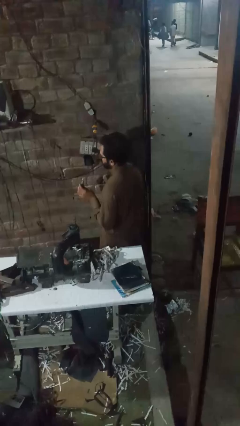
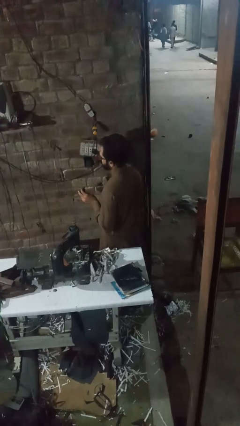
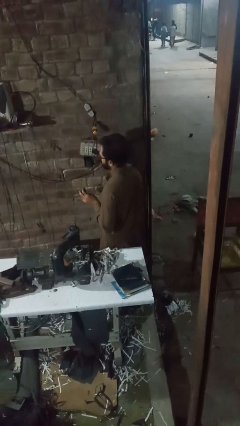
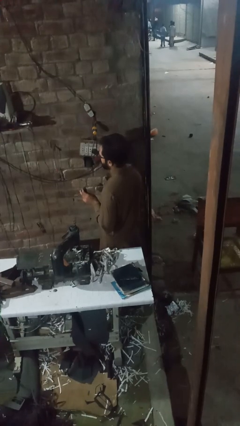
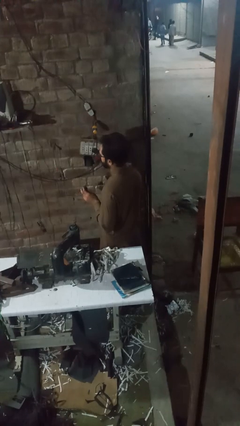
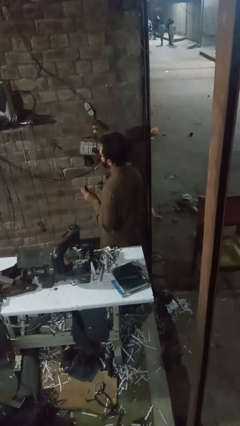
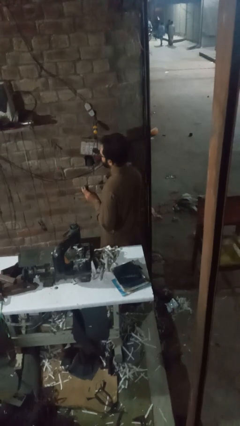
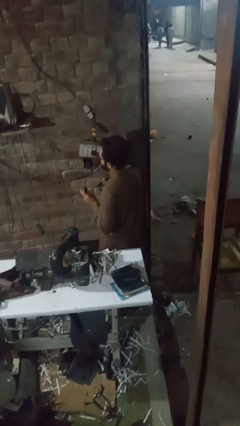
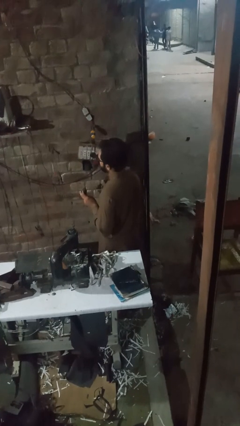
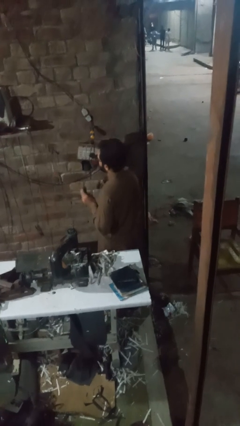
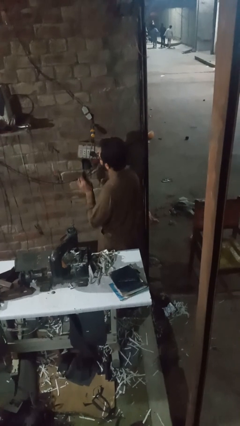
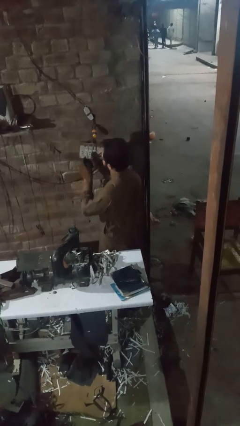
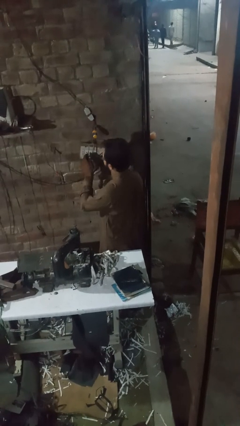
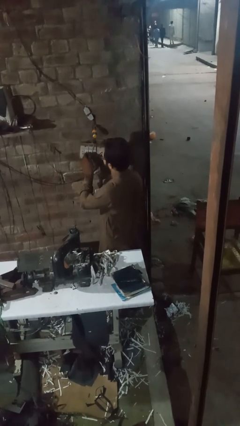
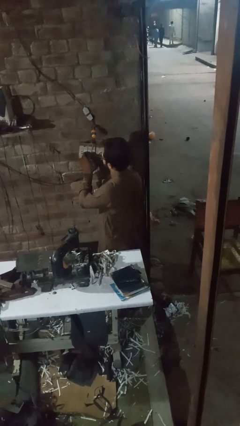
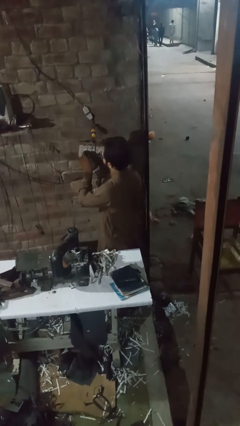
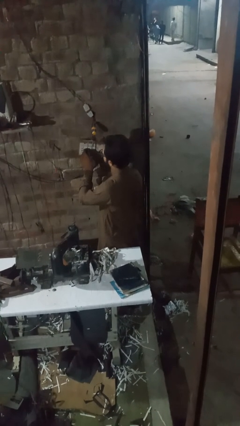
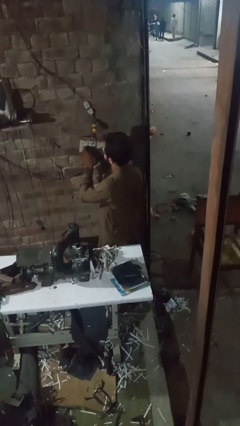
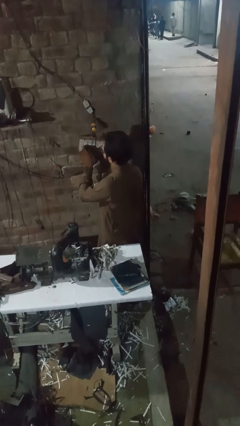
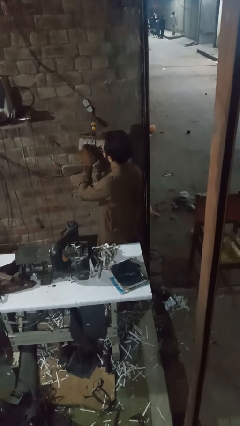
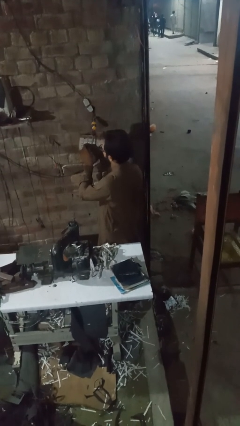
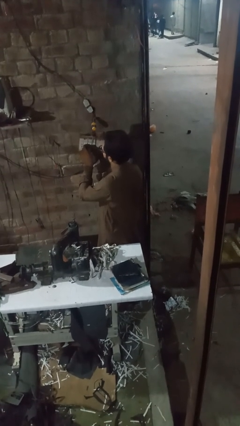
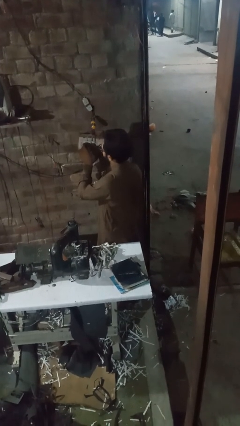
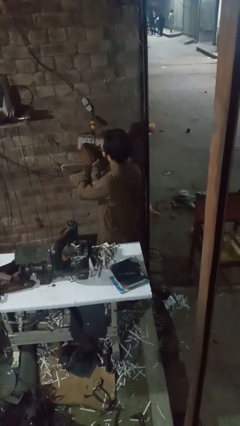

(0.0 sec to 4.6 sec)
person plugs into electrical socket

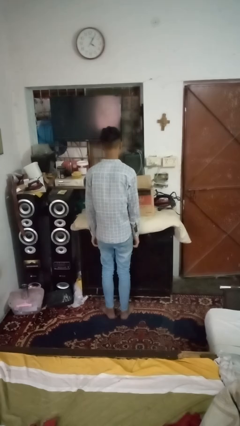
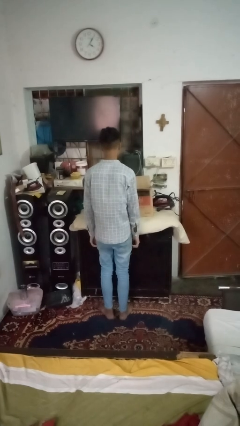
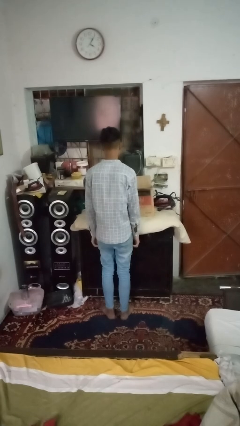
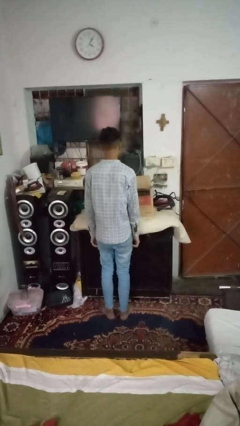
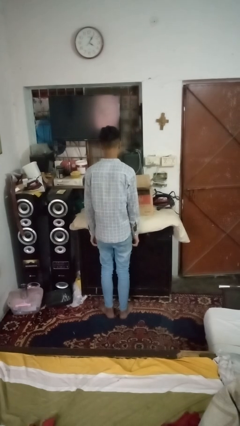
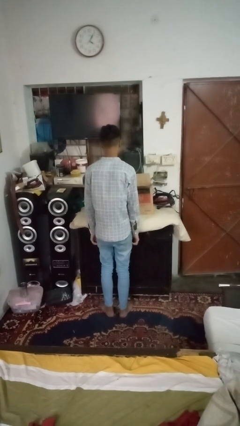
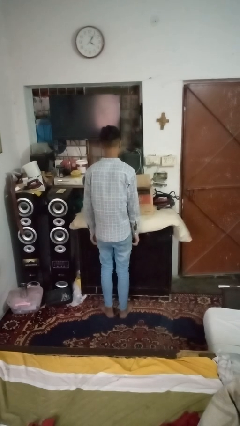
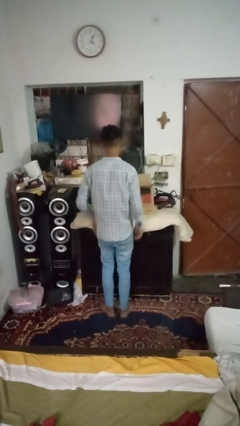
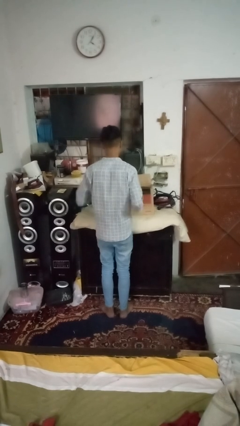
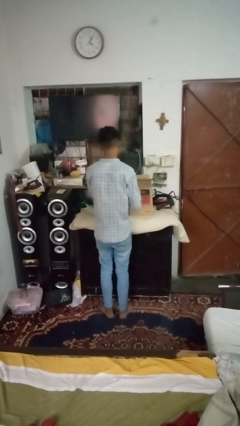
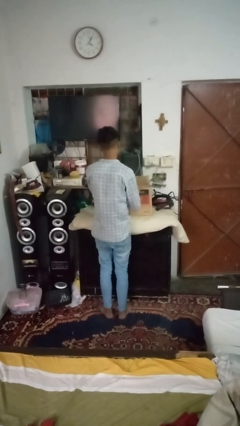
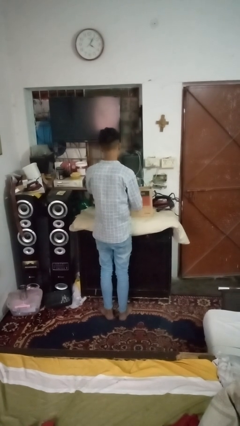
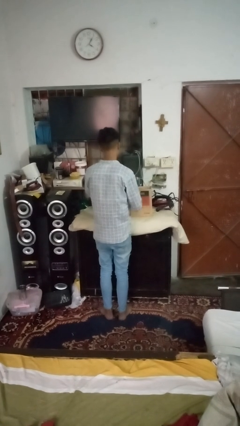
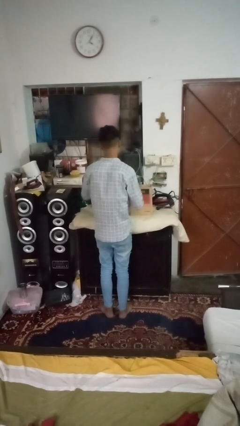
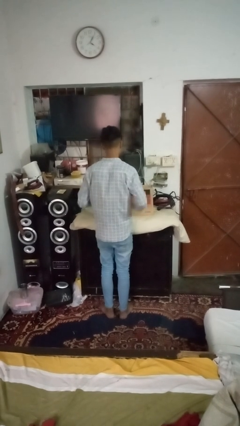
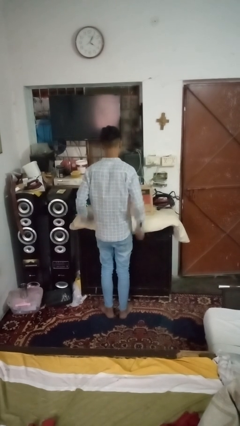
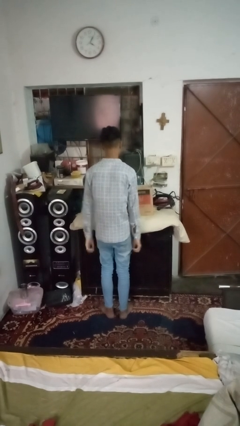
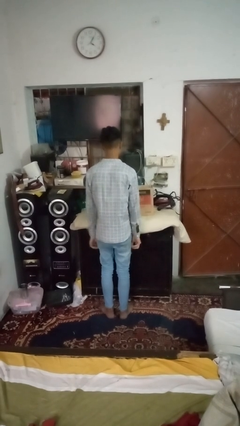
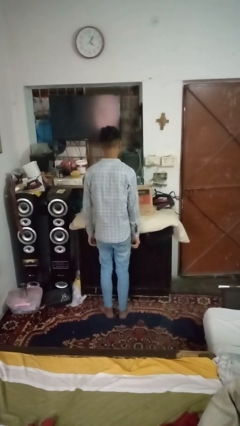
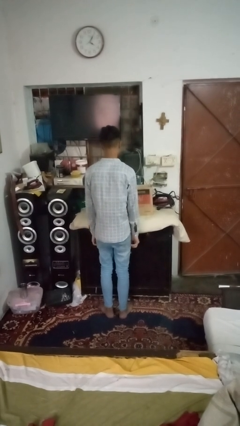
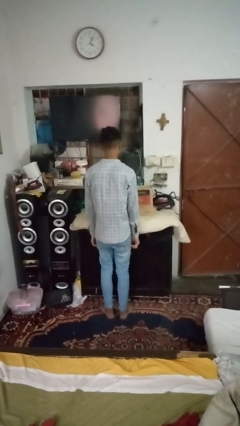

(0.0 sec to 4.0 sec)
person closes box

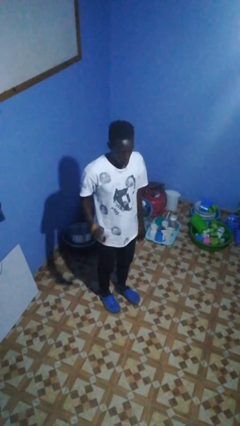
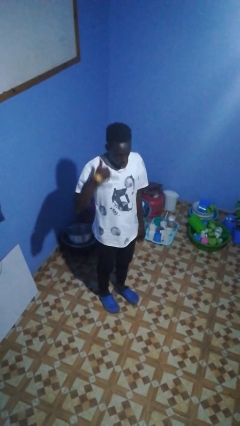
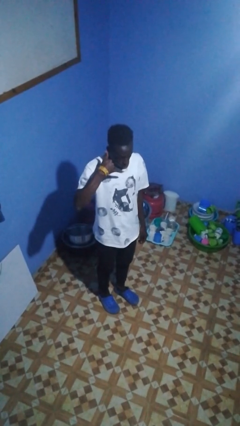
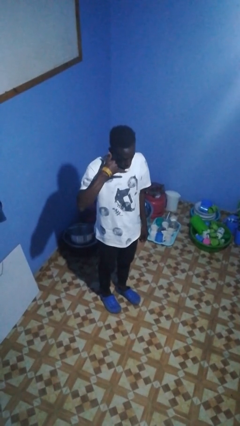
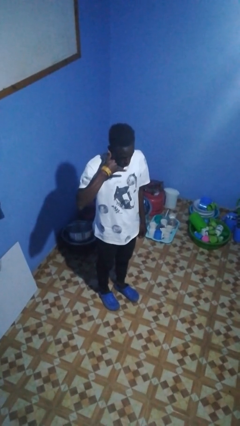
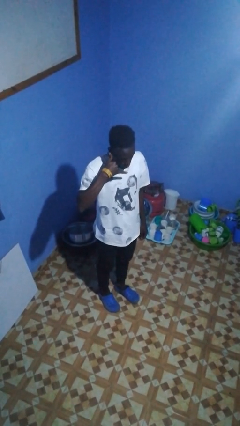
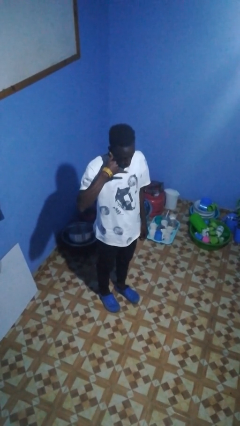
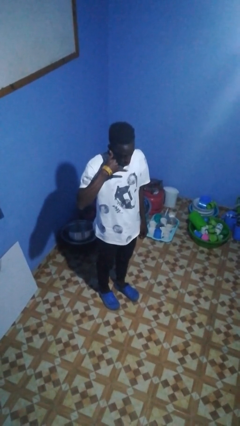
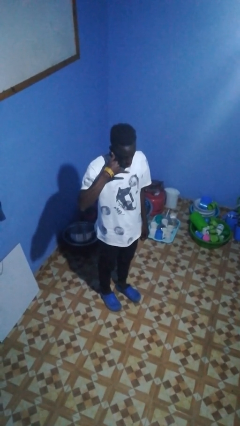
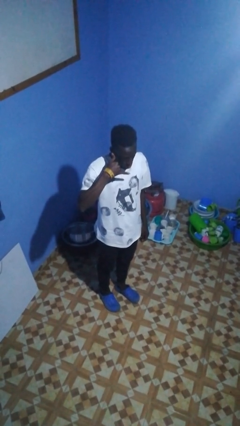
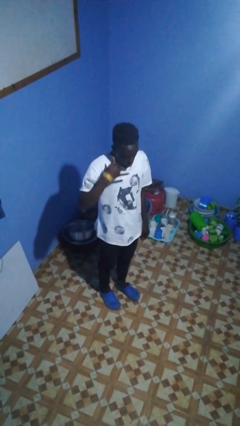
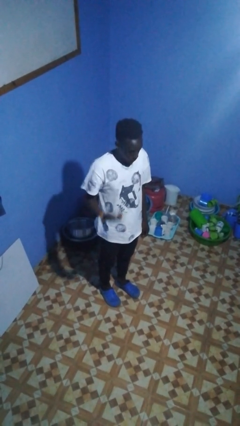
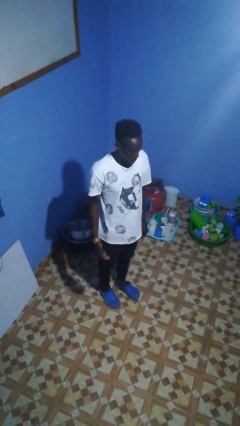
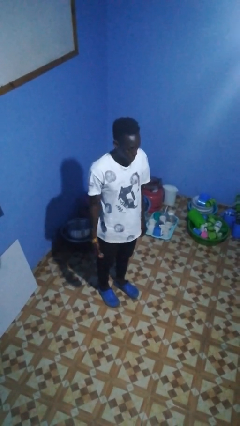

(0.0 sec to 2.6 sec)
person gestures call me

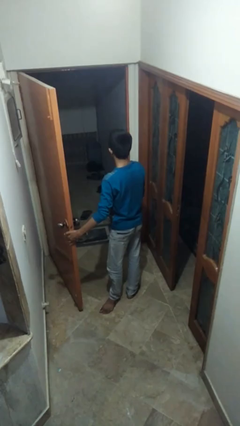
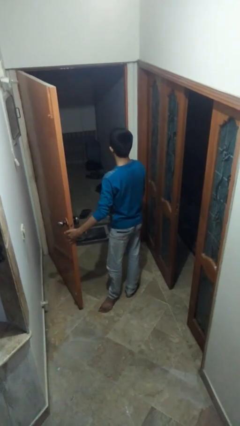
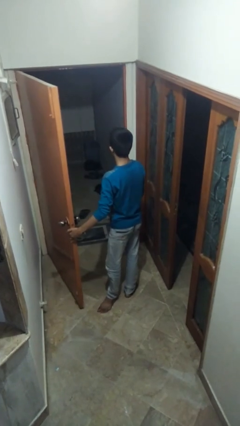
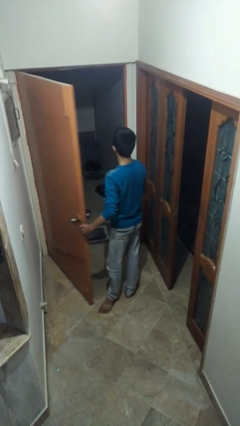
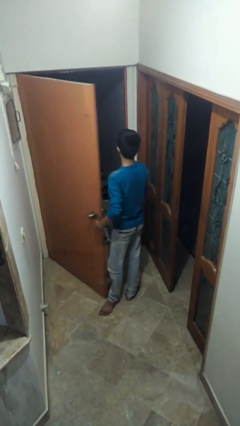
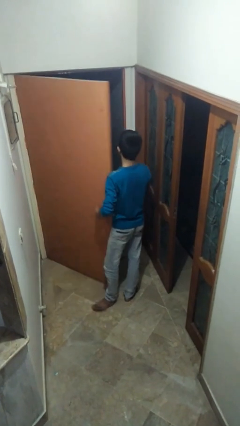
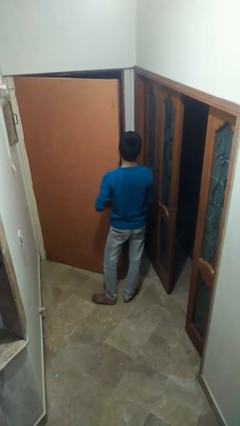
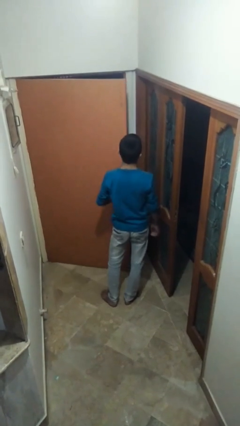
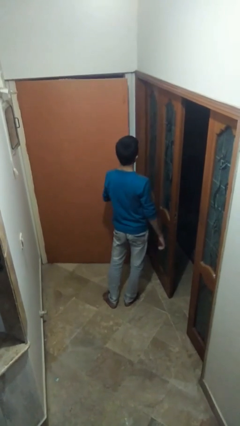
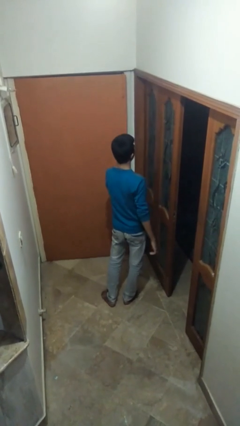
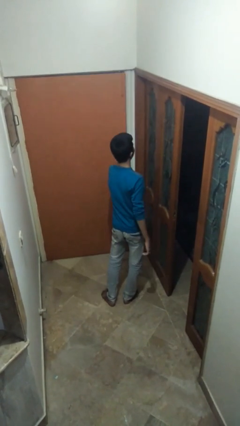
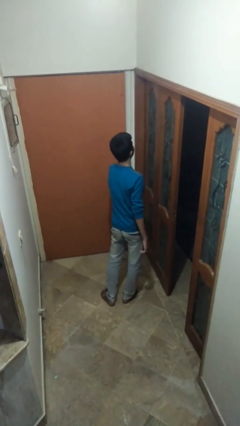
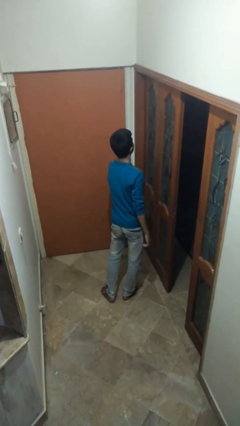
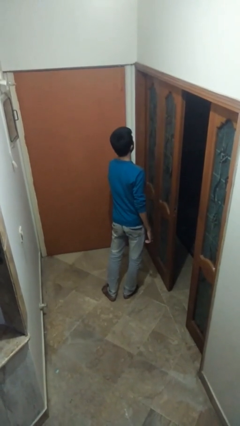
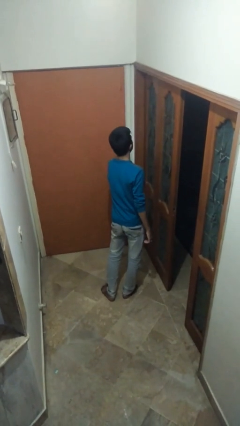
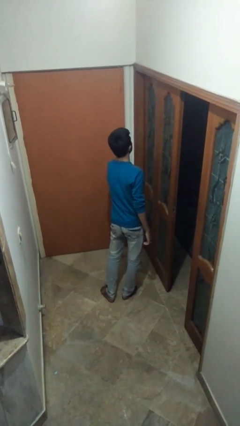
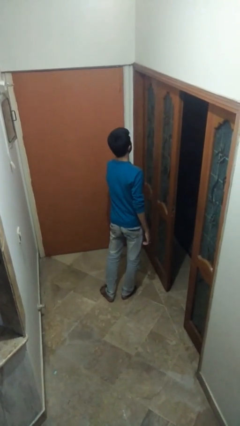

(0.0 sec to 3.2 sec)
person closes facility door

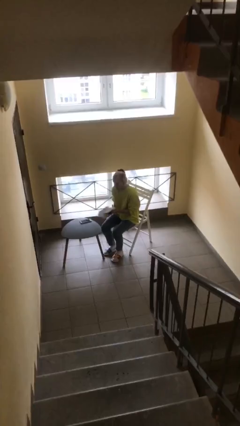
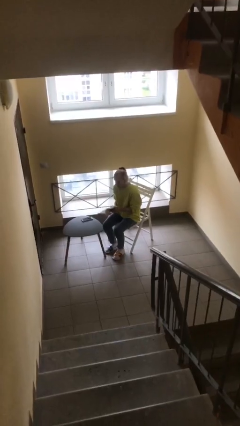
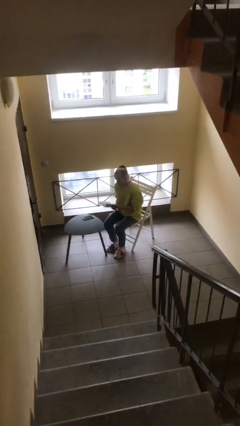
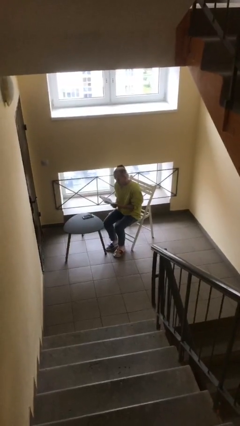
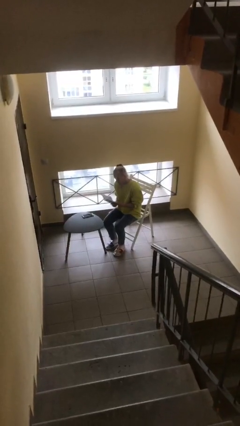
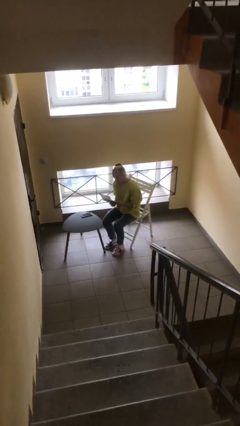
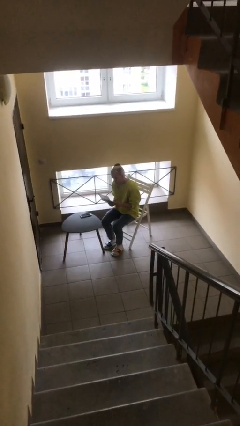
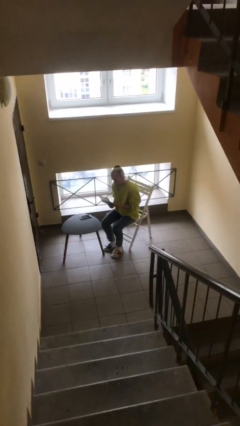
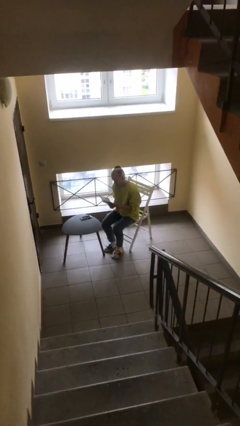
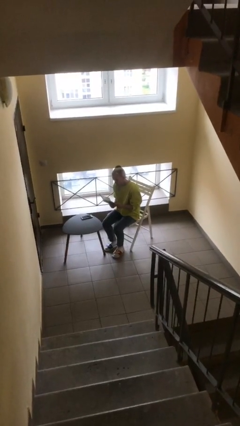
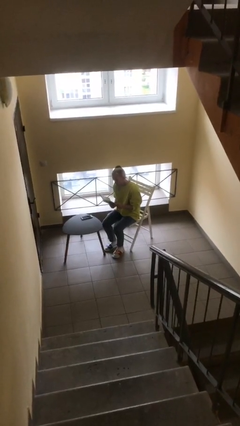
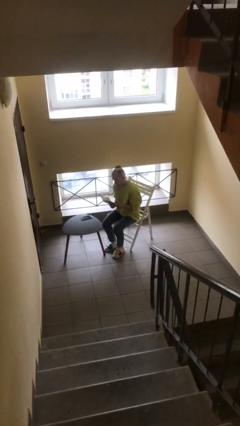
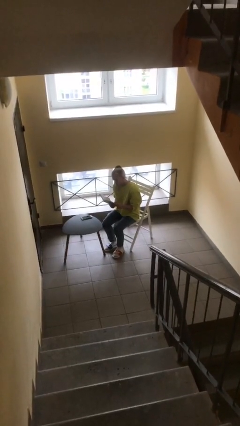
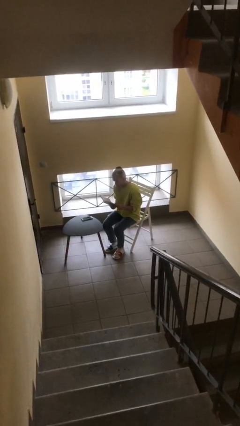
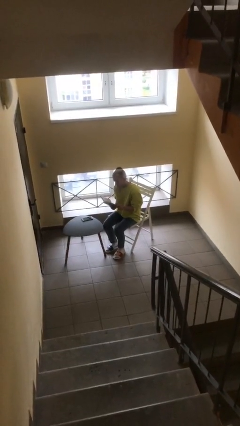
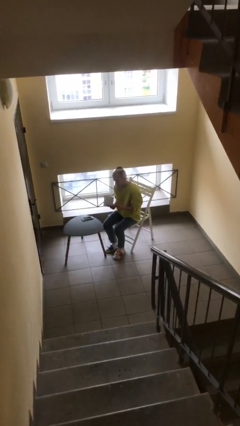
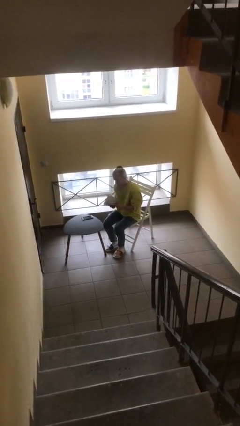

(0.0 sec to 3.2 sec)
person reads document
